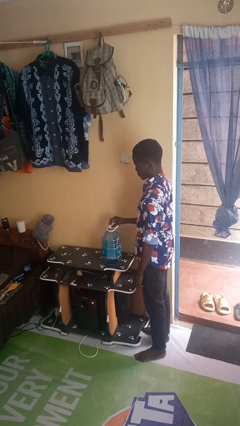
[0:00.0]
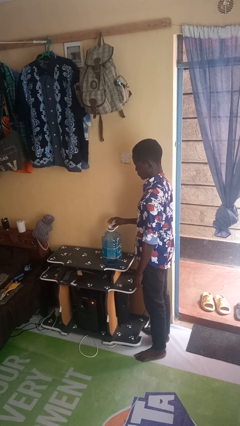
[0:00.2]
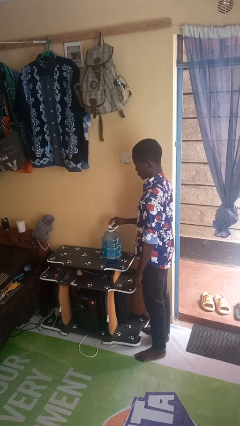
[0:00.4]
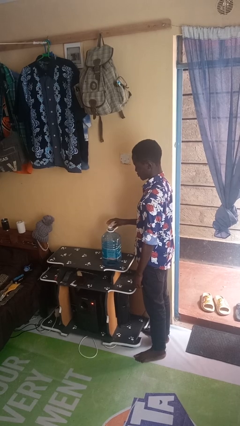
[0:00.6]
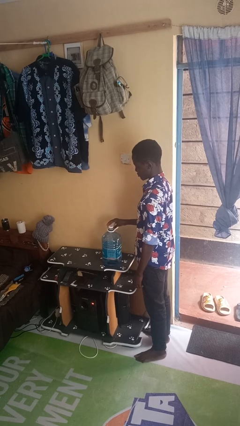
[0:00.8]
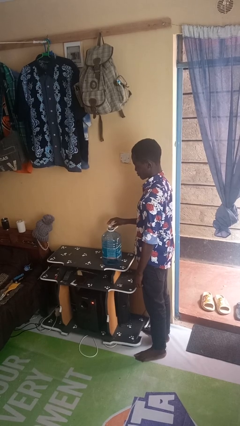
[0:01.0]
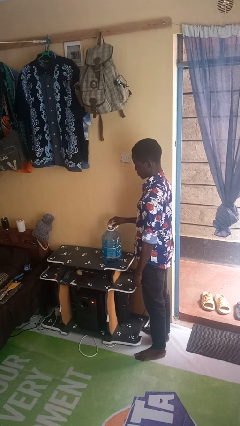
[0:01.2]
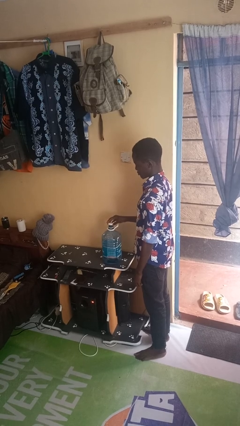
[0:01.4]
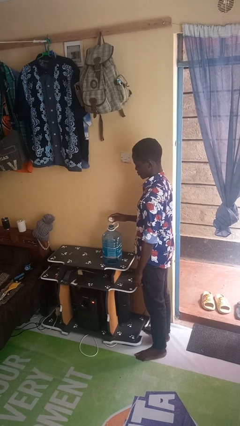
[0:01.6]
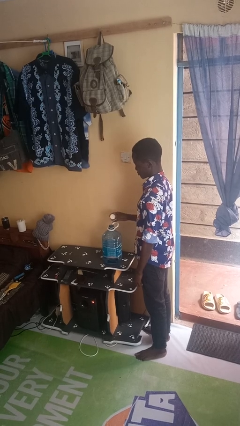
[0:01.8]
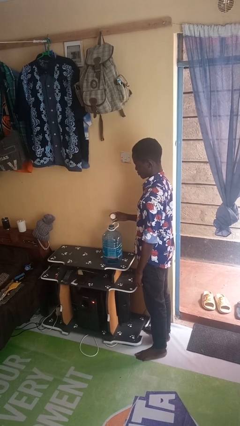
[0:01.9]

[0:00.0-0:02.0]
person unscrews lid from bottle

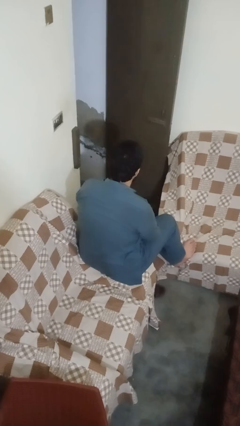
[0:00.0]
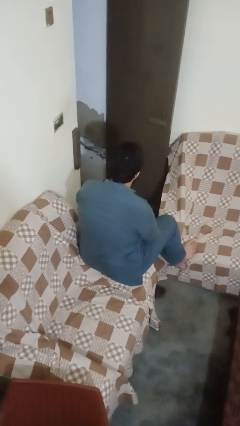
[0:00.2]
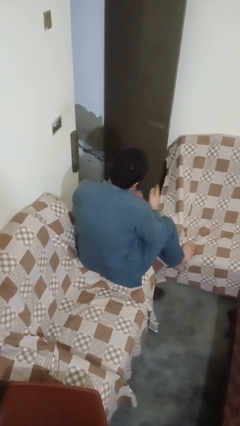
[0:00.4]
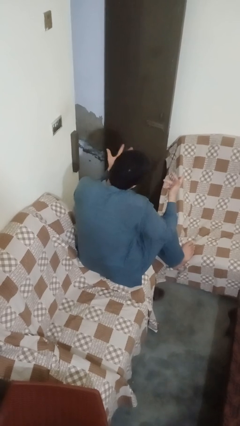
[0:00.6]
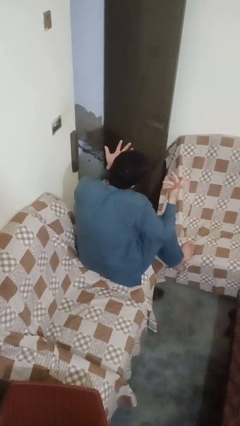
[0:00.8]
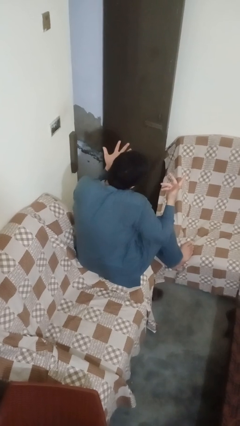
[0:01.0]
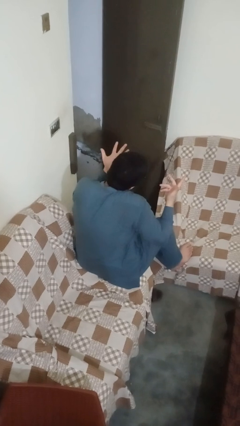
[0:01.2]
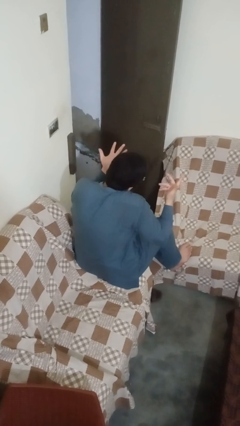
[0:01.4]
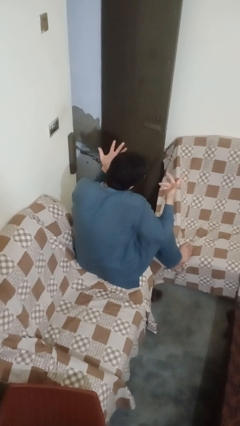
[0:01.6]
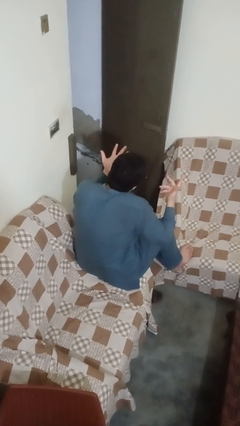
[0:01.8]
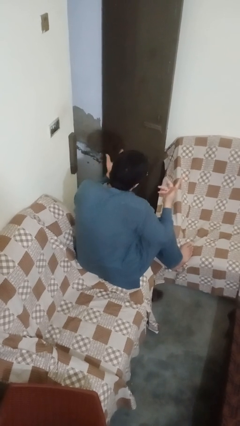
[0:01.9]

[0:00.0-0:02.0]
person shrugs

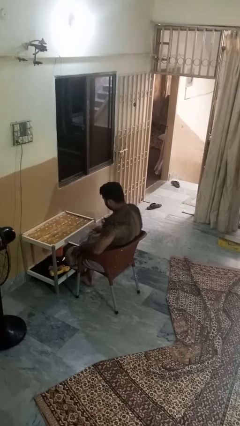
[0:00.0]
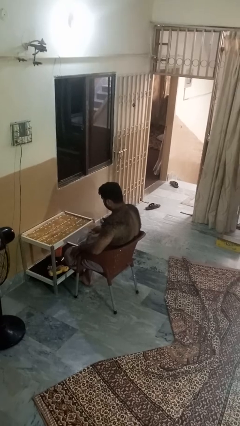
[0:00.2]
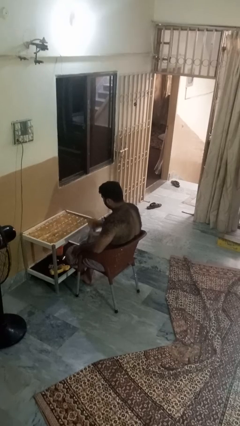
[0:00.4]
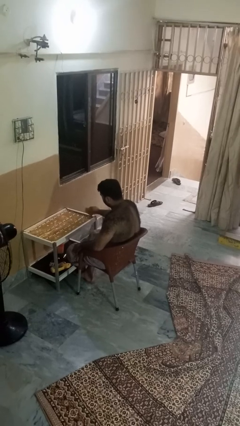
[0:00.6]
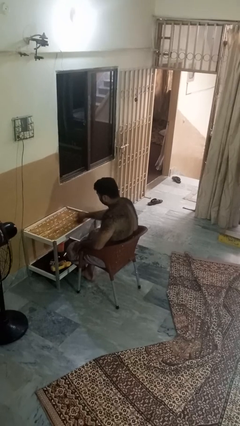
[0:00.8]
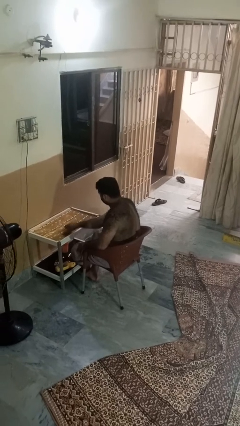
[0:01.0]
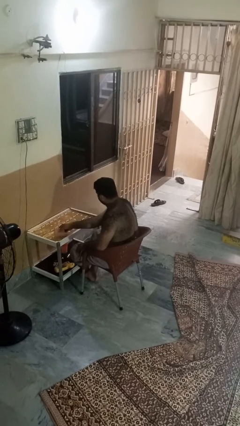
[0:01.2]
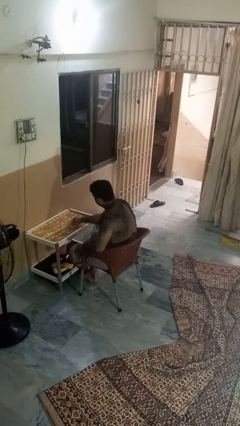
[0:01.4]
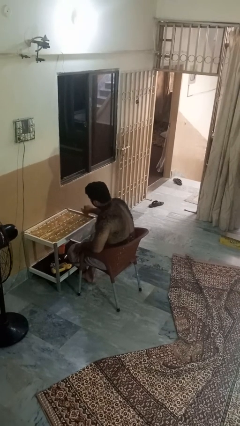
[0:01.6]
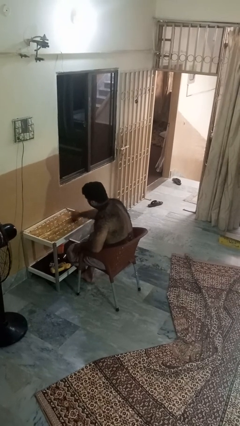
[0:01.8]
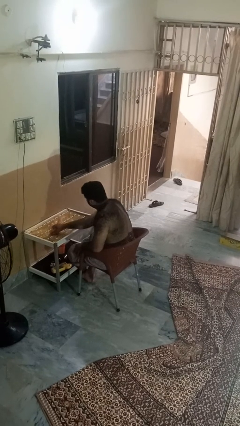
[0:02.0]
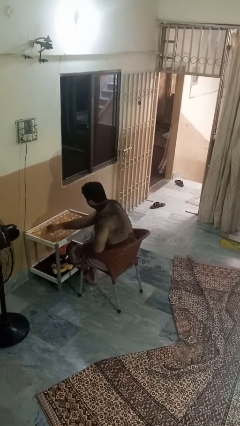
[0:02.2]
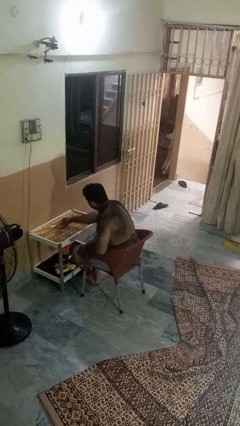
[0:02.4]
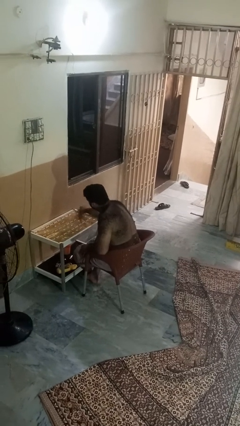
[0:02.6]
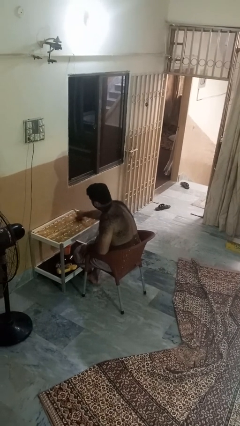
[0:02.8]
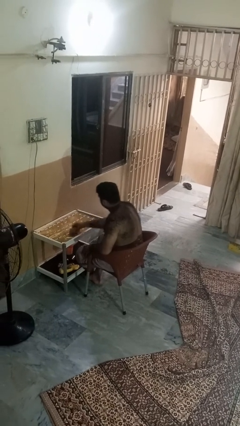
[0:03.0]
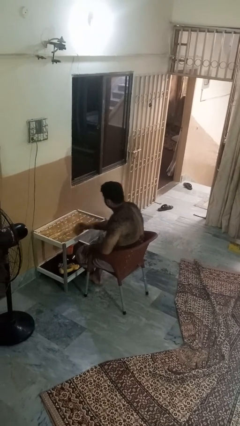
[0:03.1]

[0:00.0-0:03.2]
person cleans table with rag

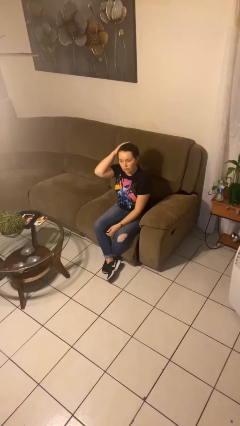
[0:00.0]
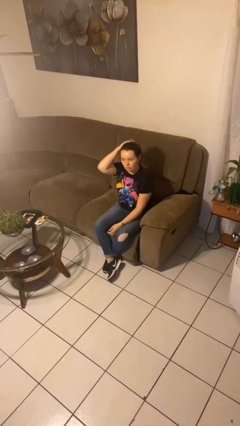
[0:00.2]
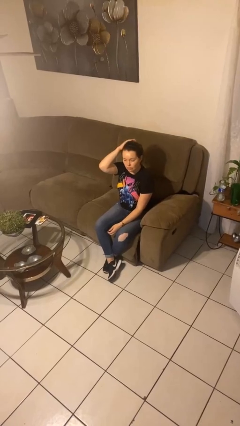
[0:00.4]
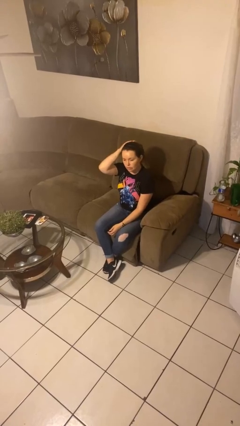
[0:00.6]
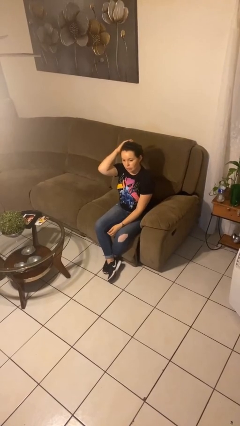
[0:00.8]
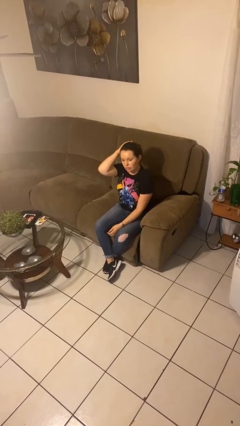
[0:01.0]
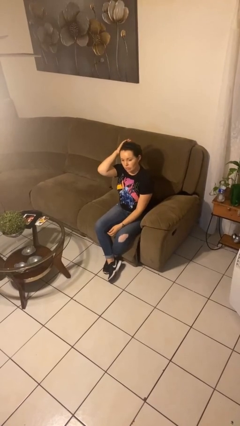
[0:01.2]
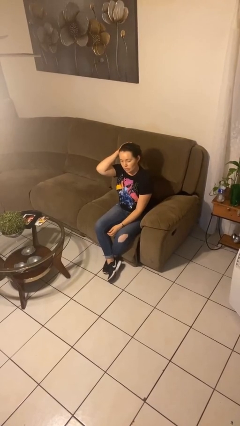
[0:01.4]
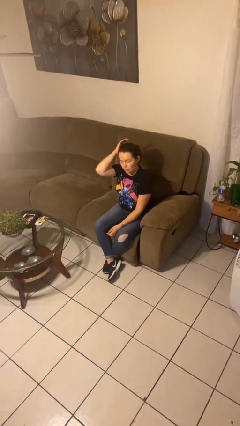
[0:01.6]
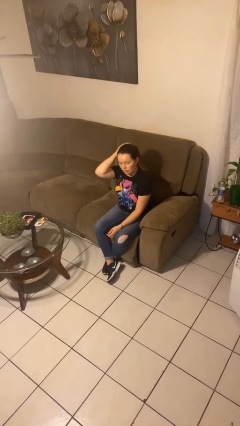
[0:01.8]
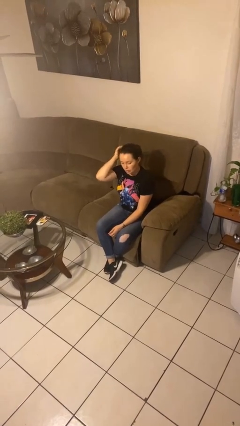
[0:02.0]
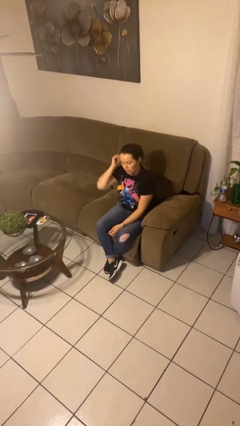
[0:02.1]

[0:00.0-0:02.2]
person pats head

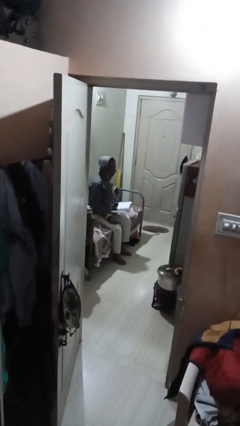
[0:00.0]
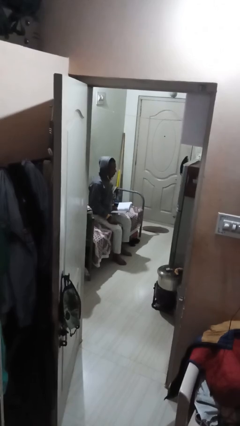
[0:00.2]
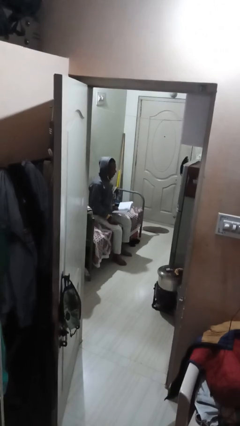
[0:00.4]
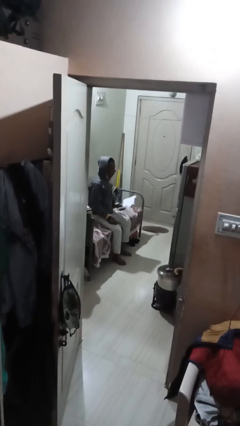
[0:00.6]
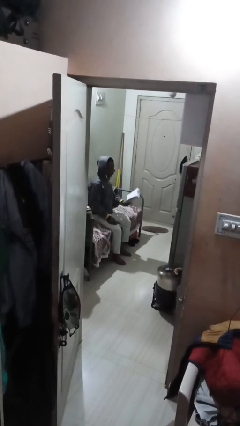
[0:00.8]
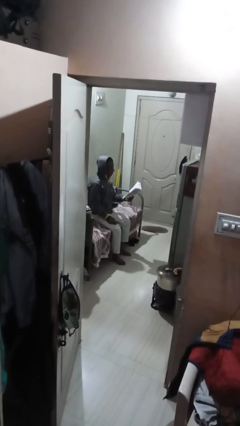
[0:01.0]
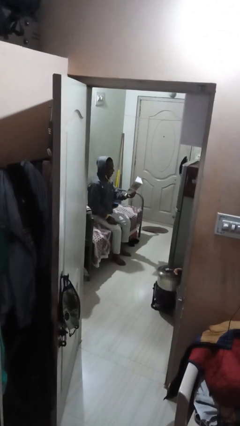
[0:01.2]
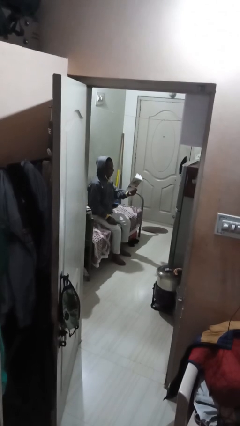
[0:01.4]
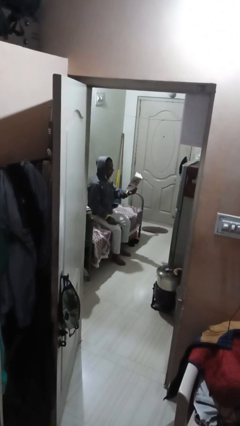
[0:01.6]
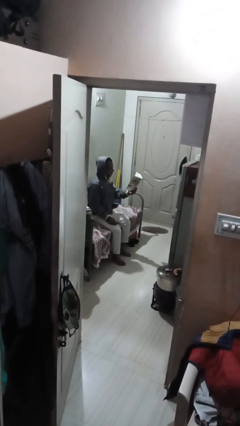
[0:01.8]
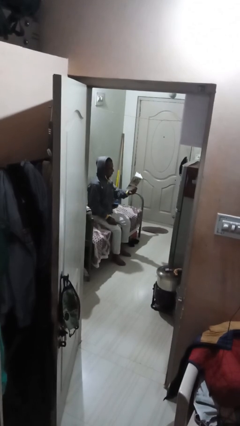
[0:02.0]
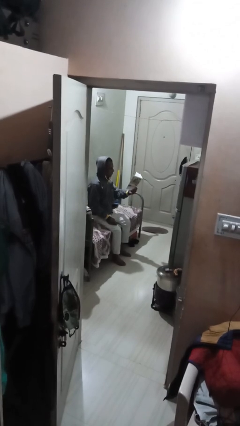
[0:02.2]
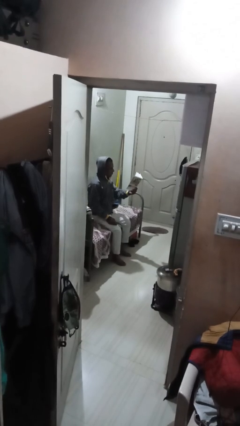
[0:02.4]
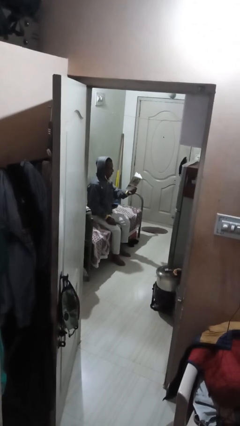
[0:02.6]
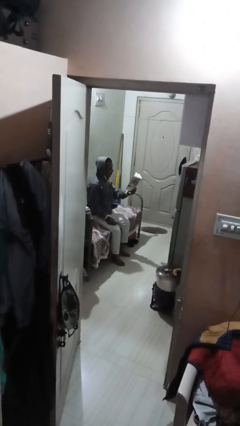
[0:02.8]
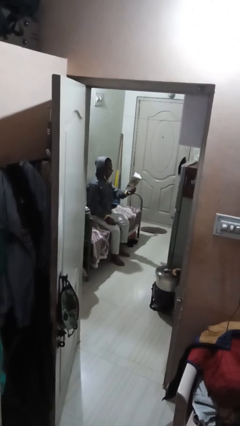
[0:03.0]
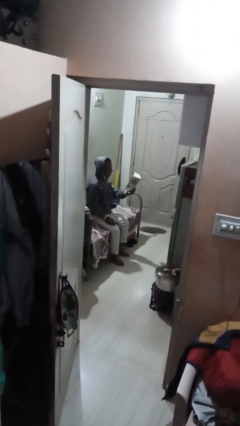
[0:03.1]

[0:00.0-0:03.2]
person reads document

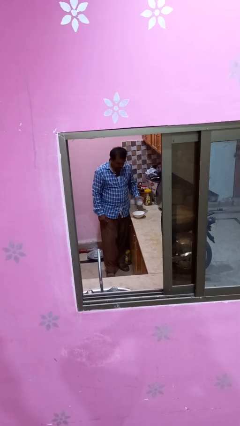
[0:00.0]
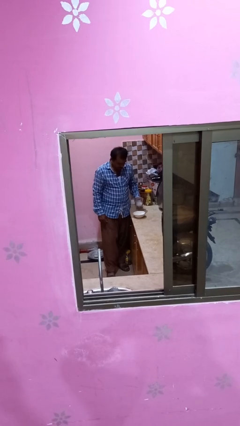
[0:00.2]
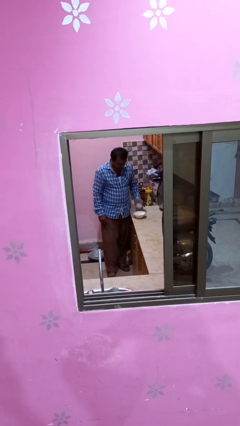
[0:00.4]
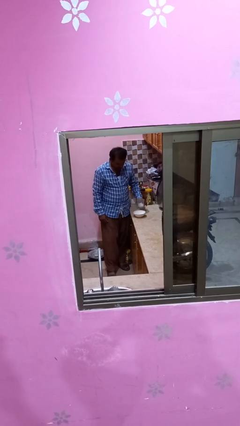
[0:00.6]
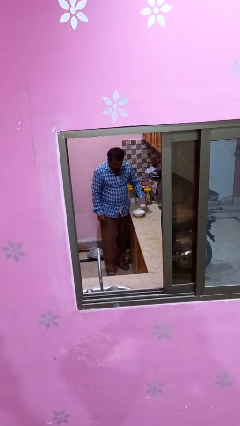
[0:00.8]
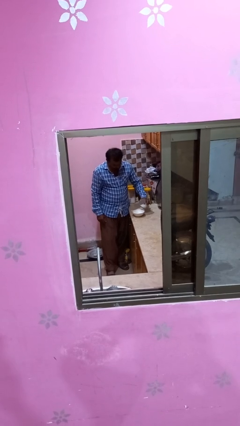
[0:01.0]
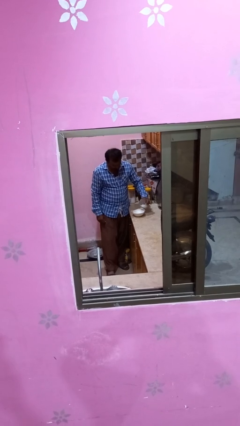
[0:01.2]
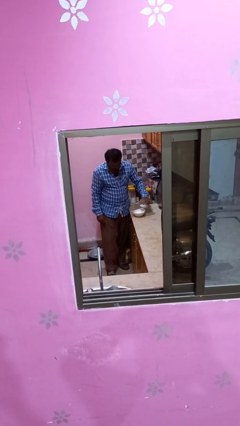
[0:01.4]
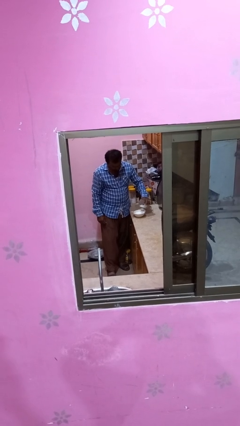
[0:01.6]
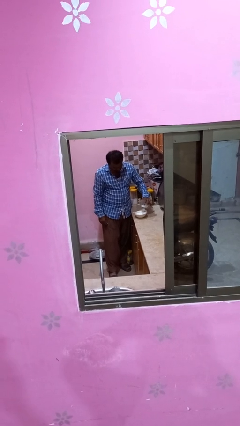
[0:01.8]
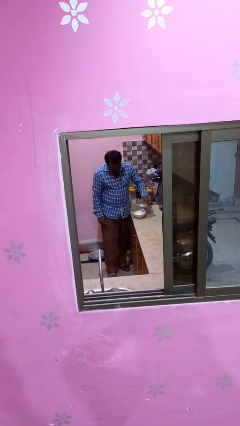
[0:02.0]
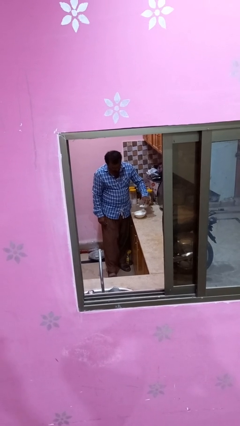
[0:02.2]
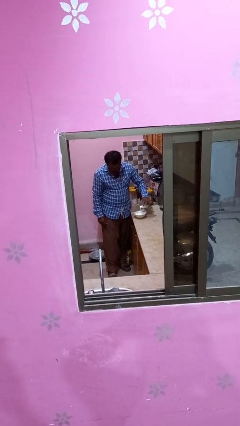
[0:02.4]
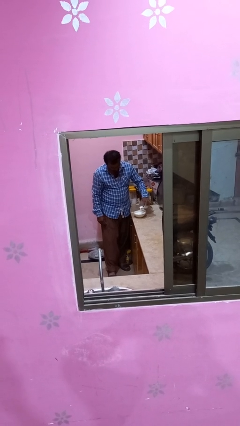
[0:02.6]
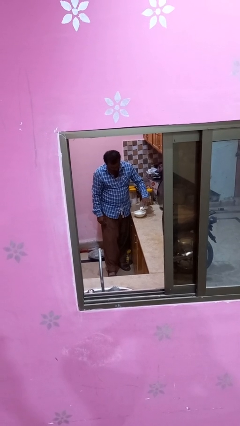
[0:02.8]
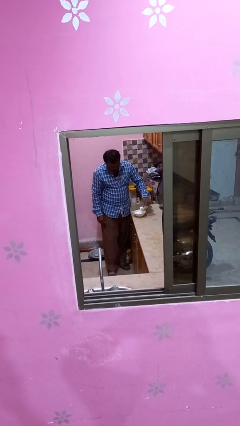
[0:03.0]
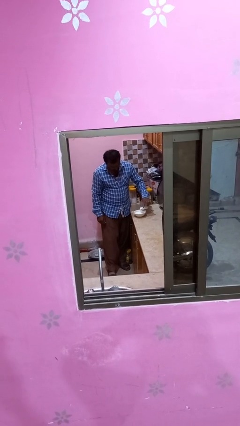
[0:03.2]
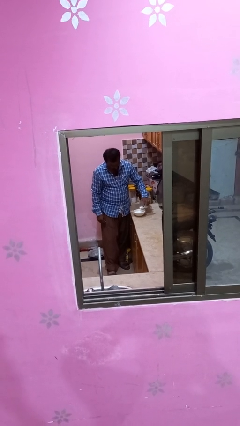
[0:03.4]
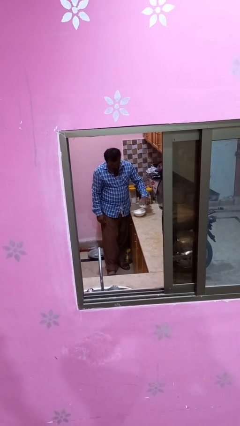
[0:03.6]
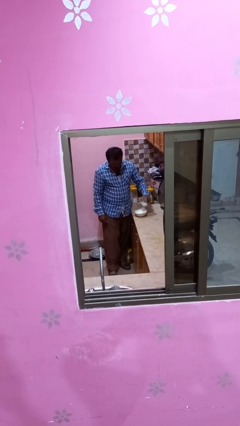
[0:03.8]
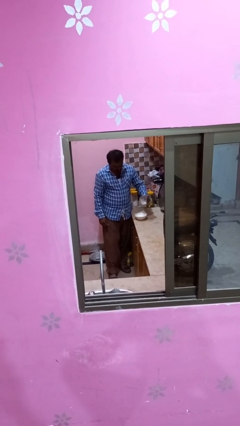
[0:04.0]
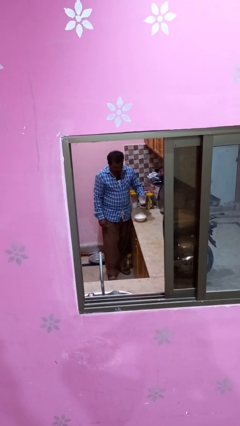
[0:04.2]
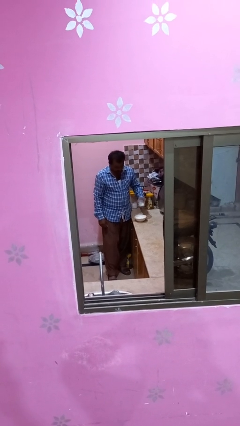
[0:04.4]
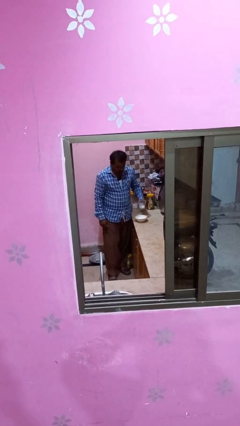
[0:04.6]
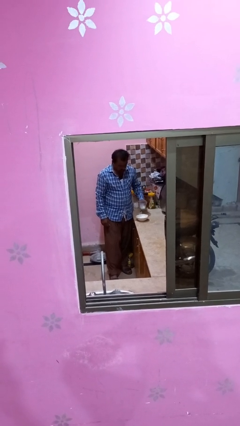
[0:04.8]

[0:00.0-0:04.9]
person pours into bowl
